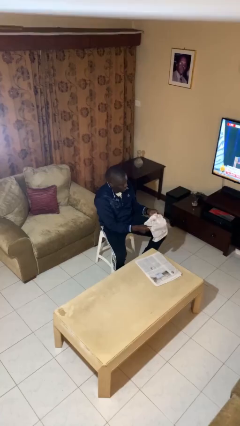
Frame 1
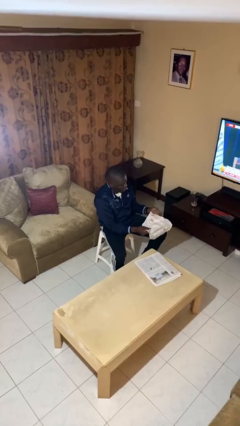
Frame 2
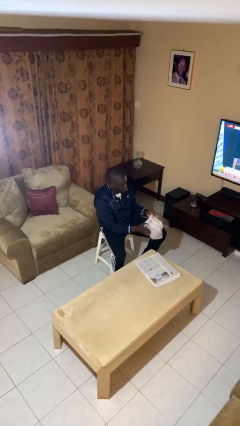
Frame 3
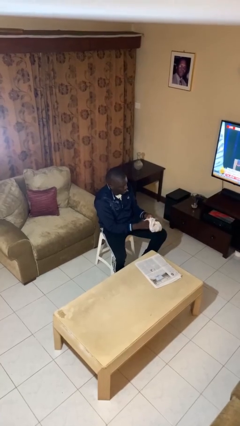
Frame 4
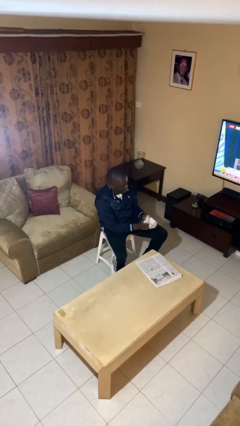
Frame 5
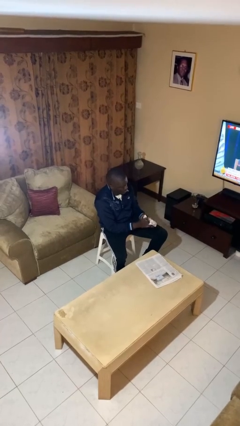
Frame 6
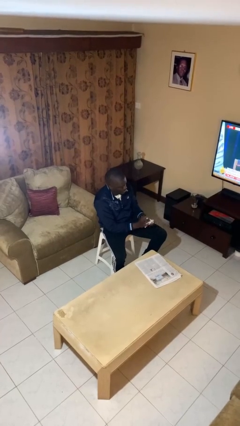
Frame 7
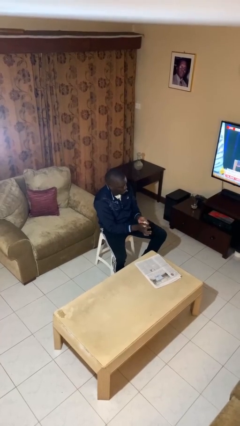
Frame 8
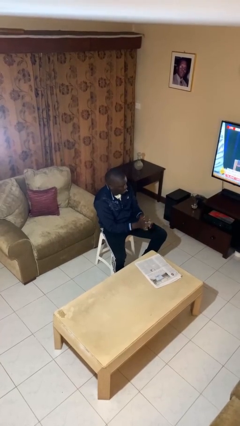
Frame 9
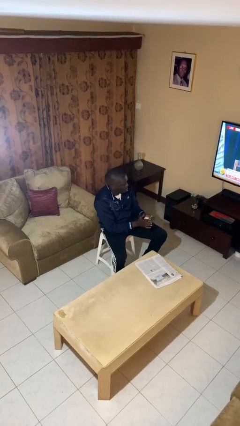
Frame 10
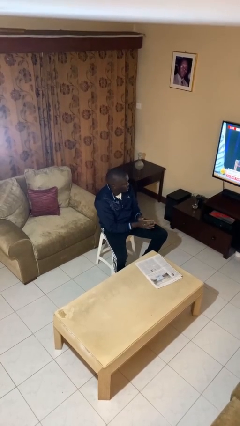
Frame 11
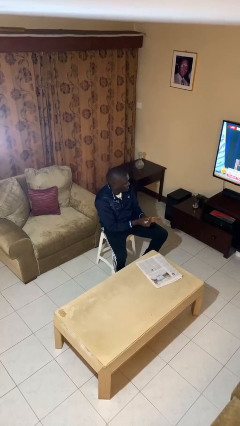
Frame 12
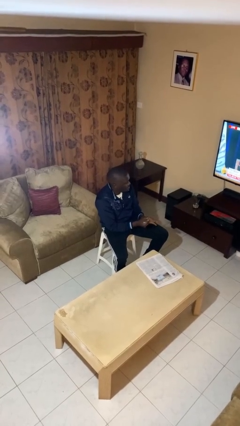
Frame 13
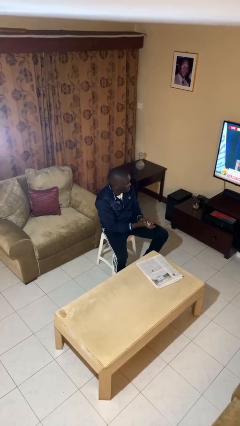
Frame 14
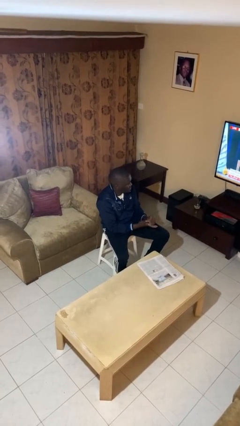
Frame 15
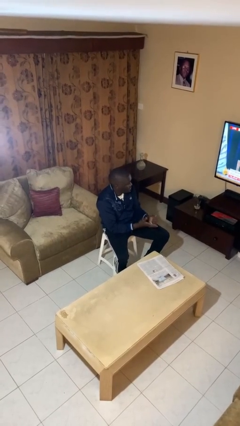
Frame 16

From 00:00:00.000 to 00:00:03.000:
person crumples paper

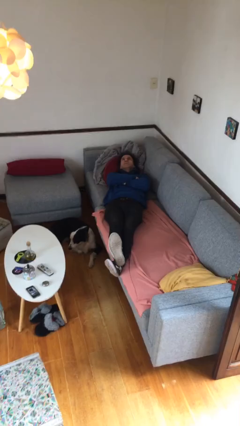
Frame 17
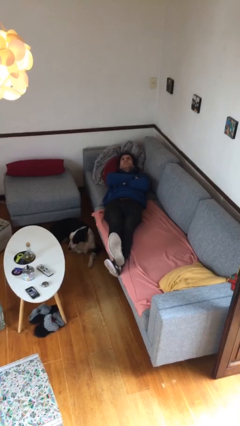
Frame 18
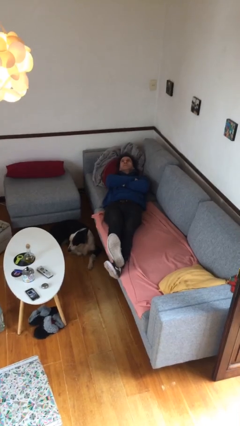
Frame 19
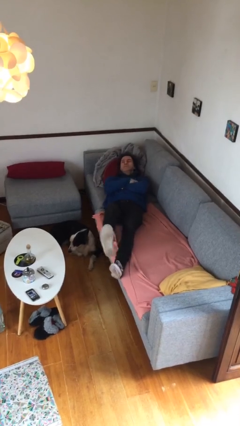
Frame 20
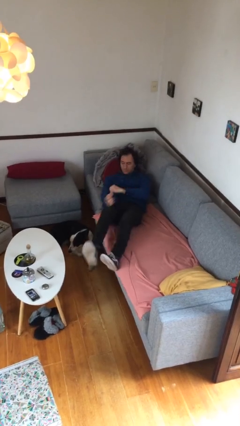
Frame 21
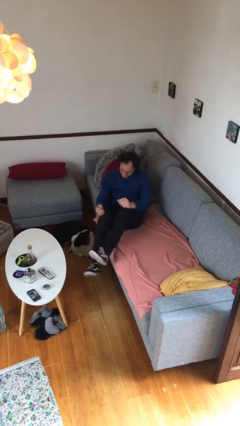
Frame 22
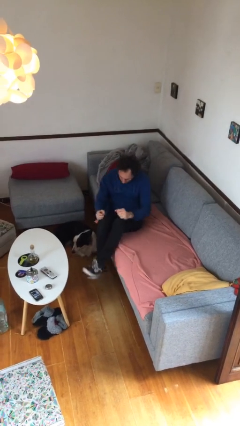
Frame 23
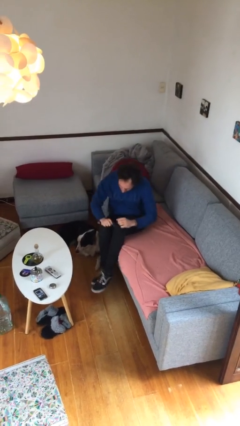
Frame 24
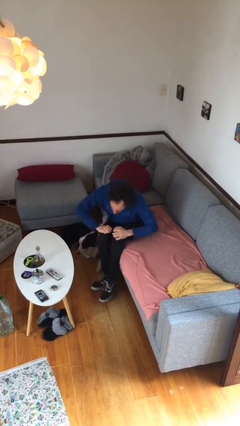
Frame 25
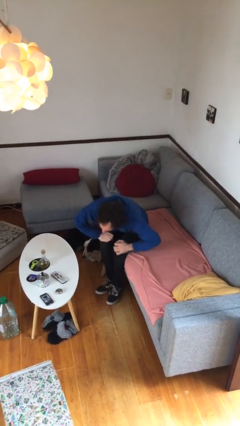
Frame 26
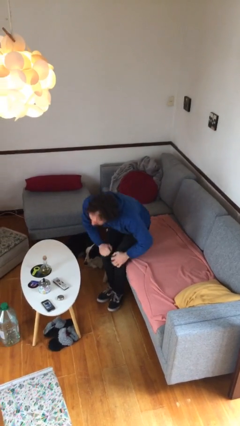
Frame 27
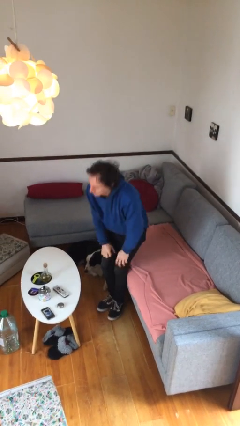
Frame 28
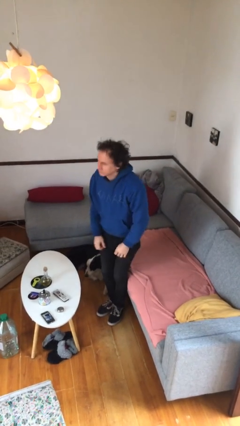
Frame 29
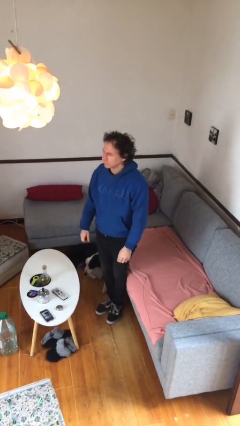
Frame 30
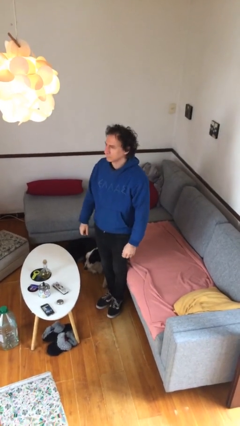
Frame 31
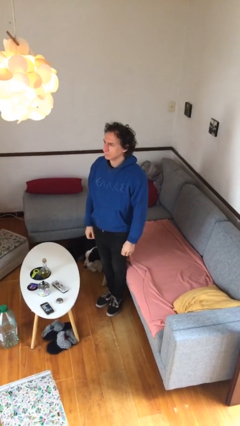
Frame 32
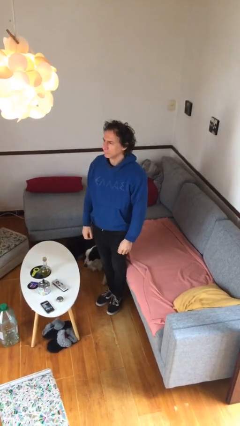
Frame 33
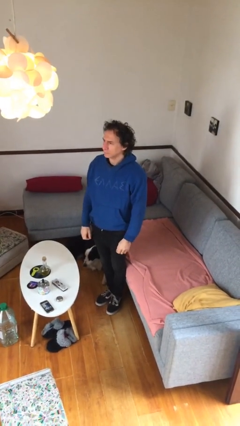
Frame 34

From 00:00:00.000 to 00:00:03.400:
person stands up

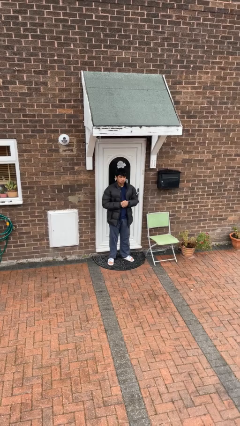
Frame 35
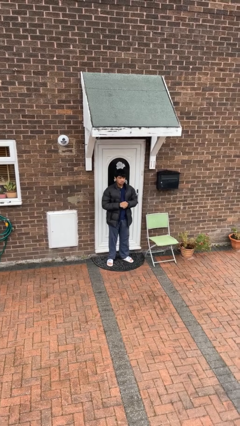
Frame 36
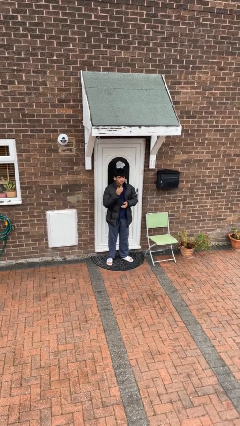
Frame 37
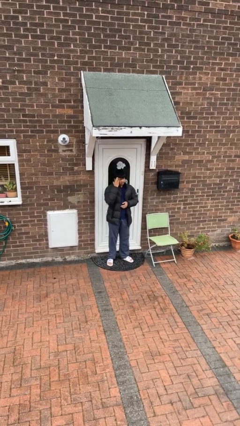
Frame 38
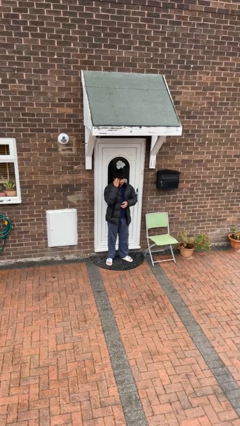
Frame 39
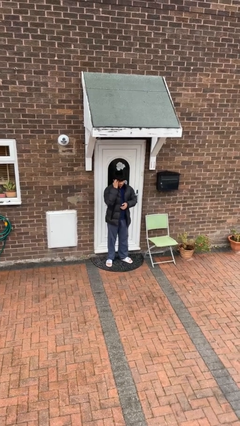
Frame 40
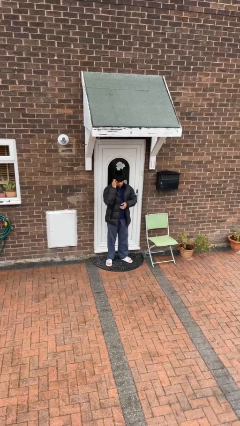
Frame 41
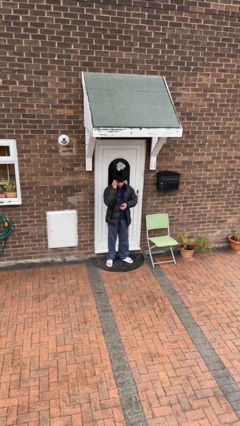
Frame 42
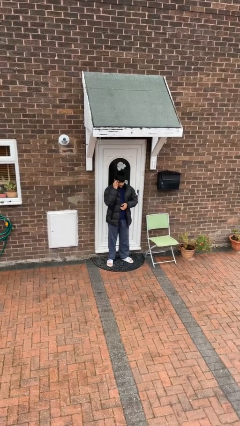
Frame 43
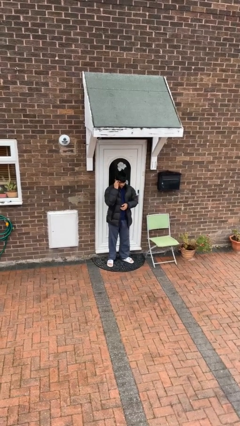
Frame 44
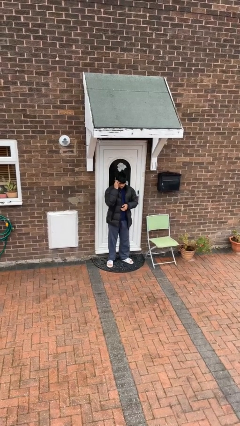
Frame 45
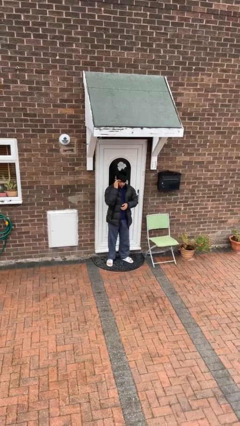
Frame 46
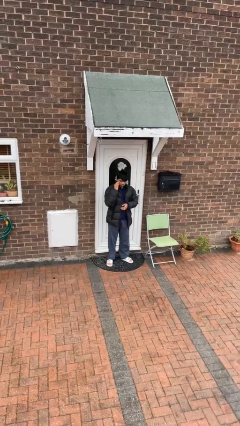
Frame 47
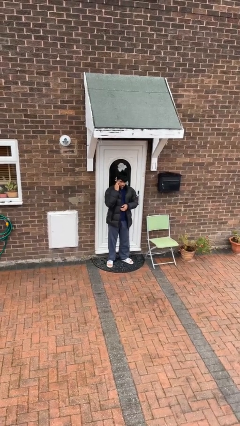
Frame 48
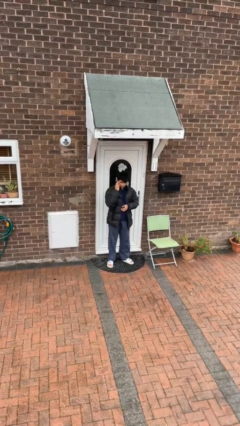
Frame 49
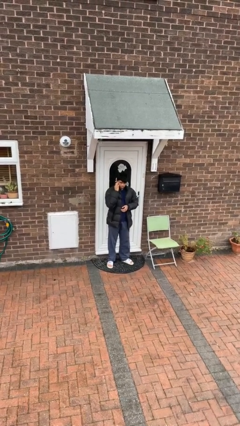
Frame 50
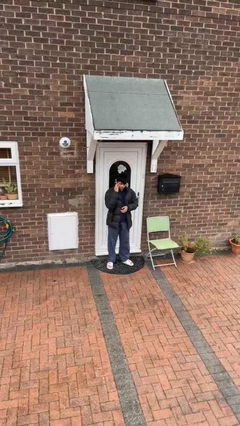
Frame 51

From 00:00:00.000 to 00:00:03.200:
person scratches face

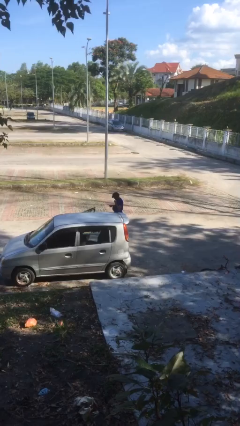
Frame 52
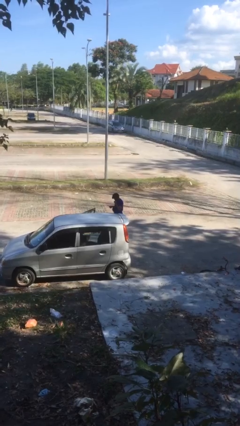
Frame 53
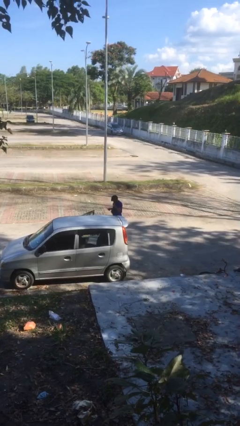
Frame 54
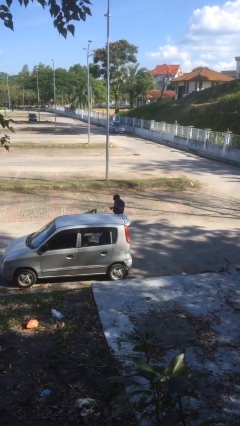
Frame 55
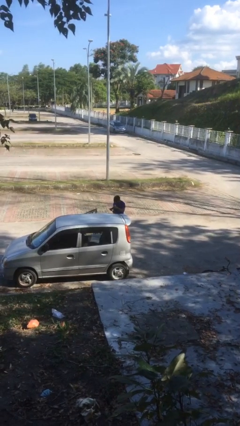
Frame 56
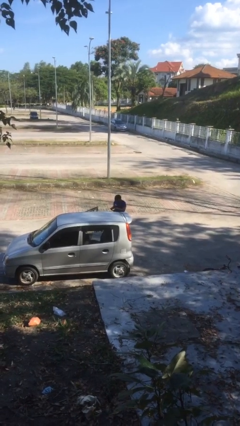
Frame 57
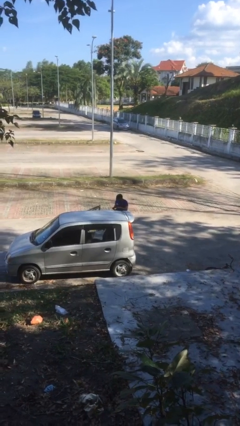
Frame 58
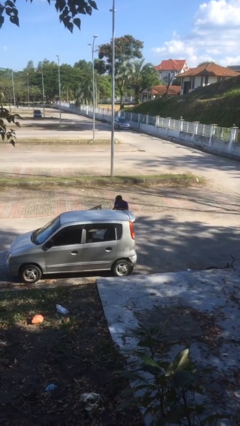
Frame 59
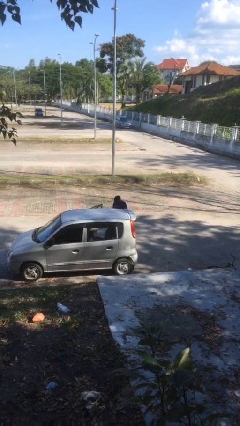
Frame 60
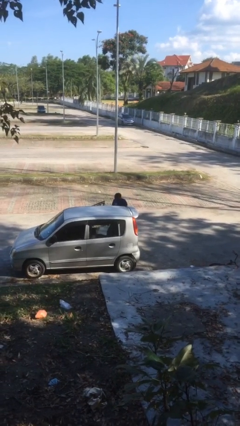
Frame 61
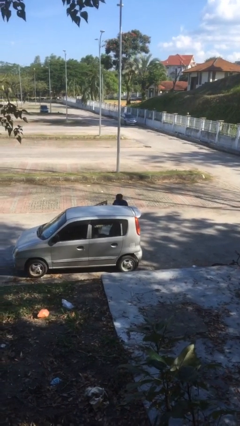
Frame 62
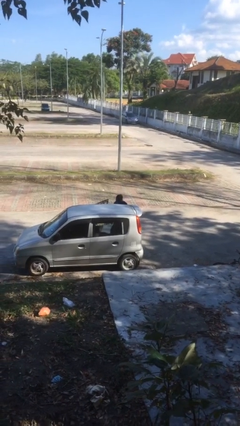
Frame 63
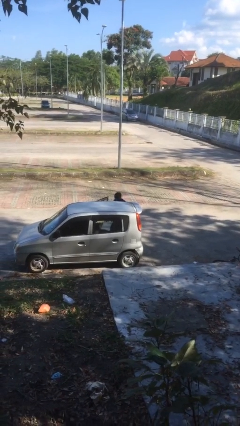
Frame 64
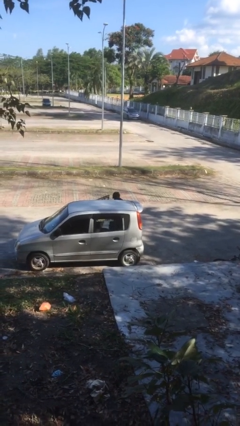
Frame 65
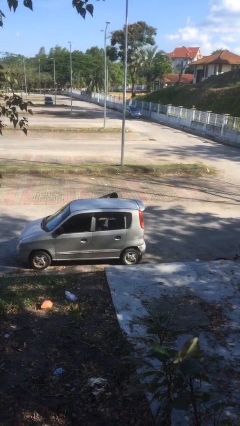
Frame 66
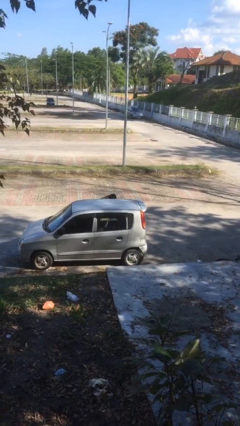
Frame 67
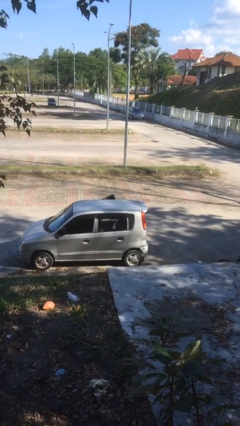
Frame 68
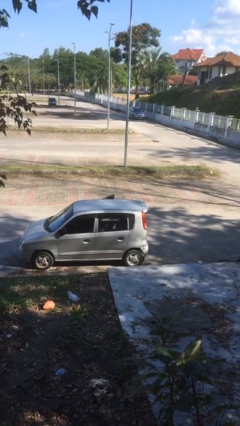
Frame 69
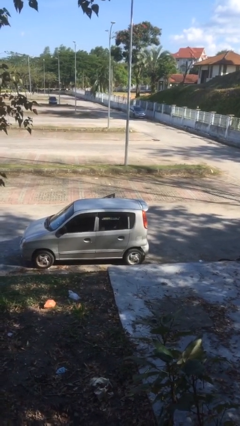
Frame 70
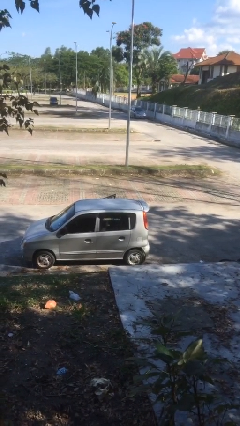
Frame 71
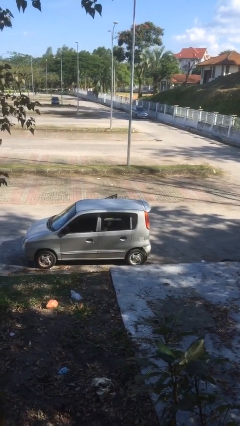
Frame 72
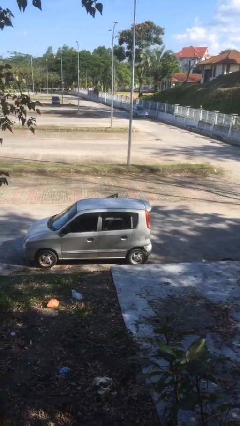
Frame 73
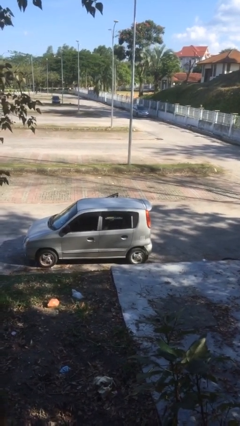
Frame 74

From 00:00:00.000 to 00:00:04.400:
person enters car

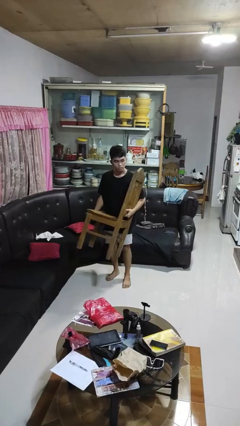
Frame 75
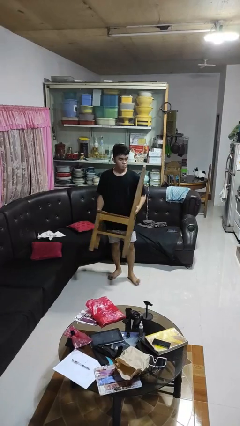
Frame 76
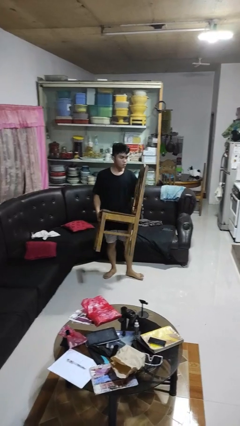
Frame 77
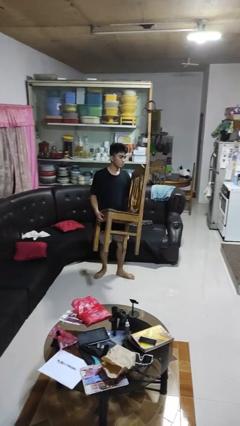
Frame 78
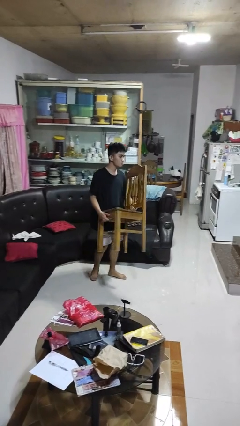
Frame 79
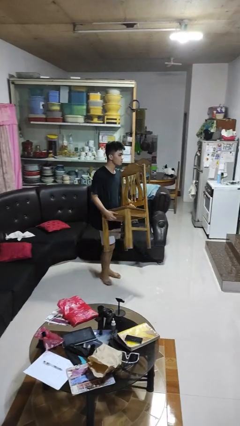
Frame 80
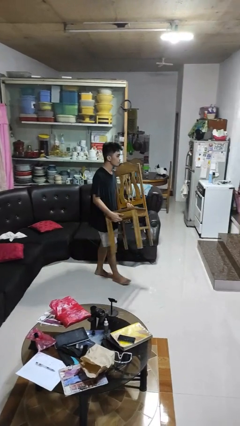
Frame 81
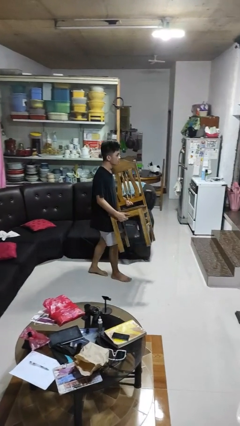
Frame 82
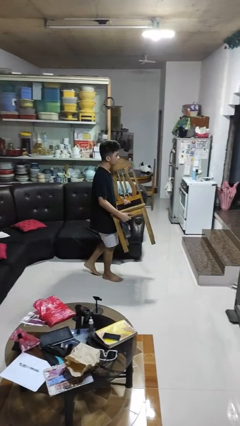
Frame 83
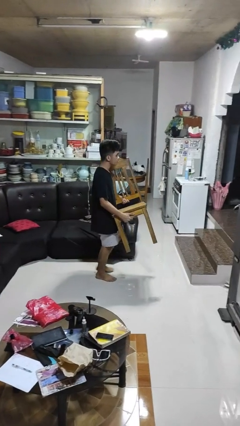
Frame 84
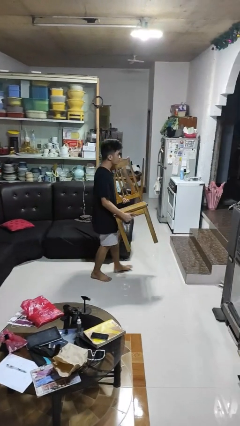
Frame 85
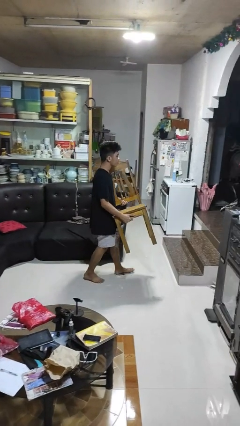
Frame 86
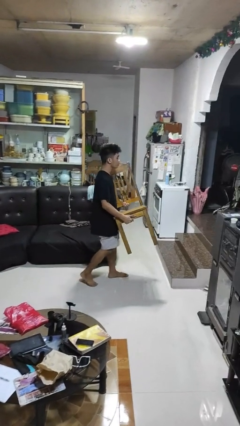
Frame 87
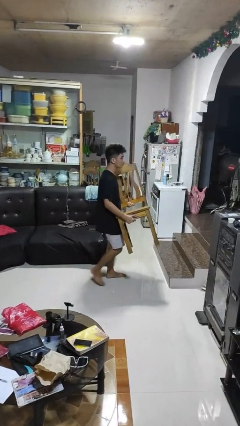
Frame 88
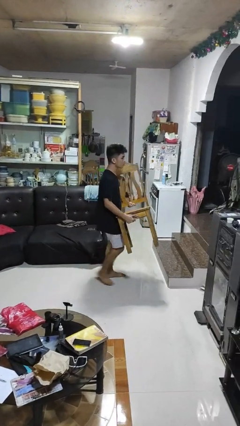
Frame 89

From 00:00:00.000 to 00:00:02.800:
person carries furniture

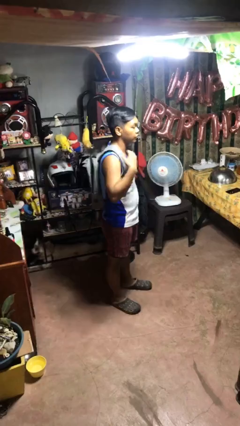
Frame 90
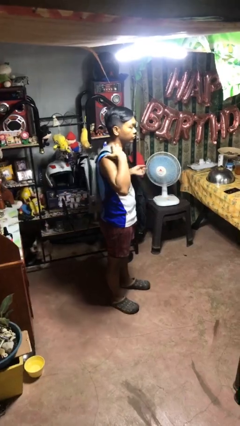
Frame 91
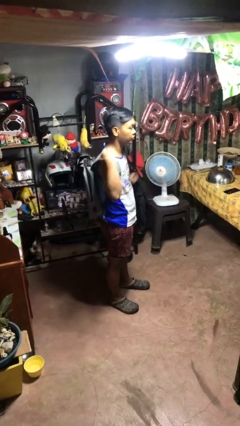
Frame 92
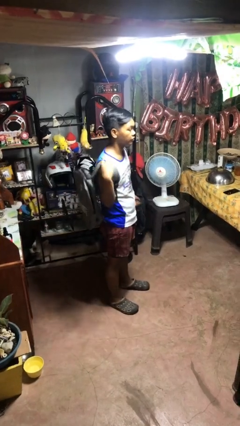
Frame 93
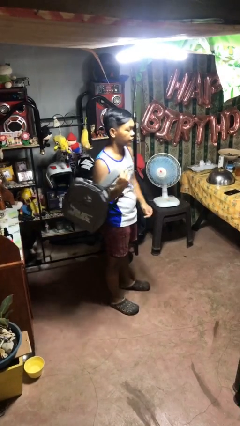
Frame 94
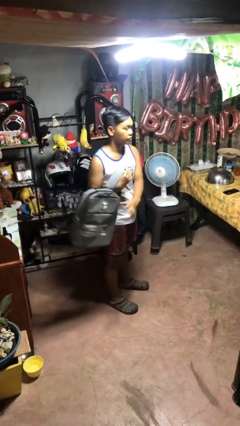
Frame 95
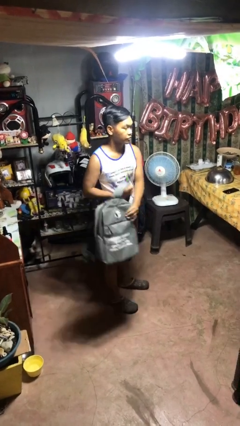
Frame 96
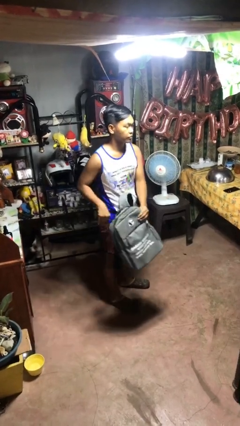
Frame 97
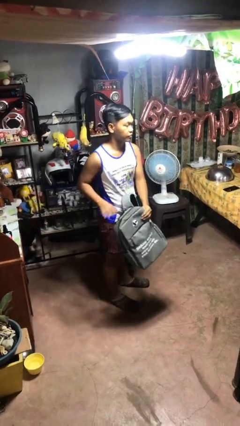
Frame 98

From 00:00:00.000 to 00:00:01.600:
person takes off backpack
